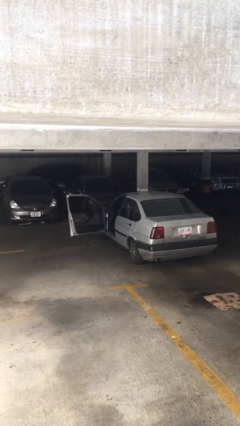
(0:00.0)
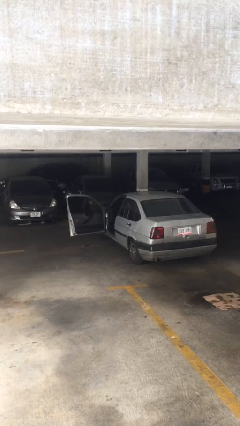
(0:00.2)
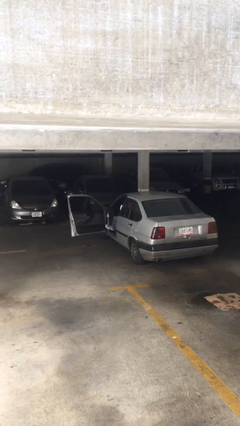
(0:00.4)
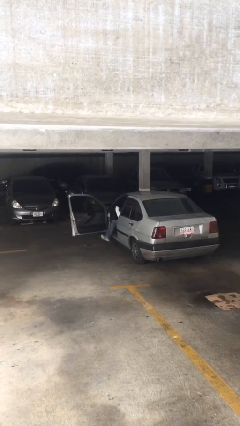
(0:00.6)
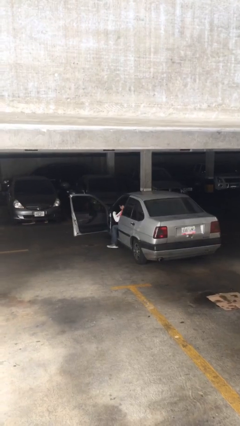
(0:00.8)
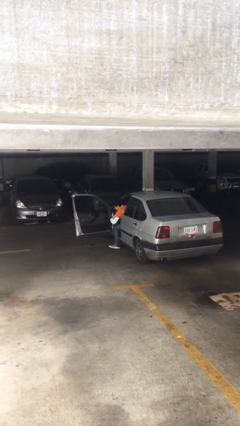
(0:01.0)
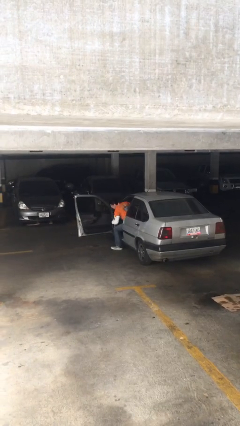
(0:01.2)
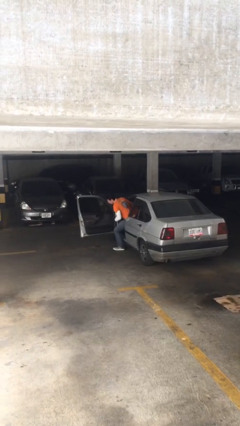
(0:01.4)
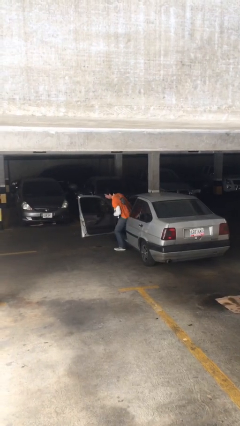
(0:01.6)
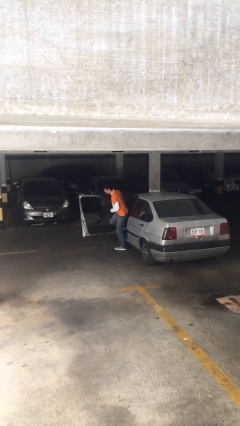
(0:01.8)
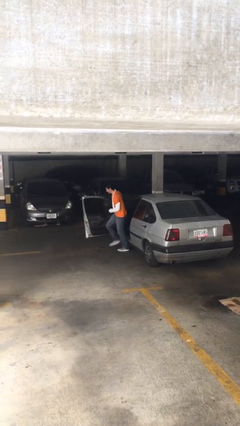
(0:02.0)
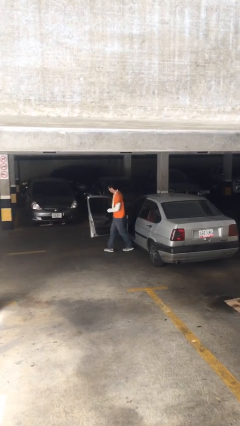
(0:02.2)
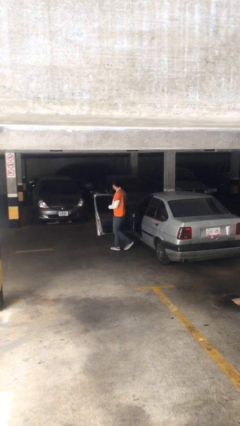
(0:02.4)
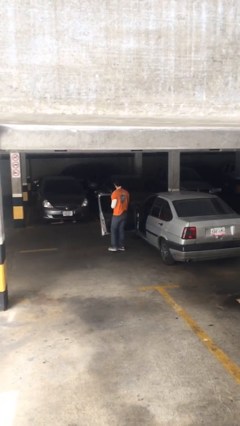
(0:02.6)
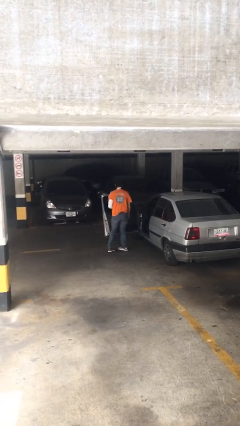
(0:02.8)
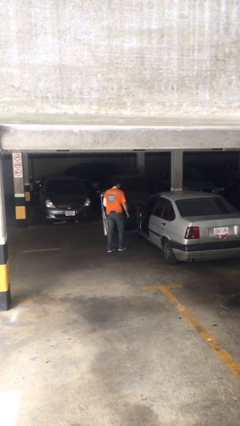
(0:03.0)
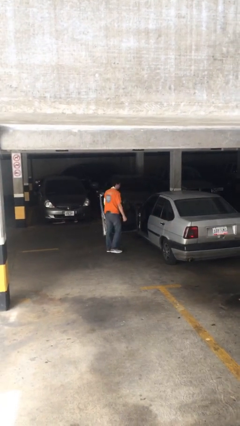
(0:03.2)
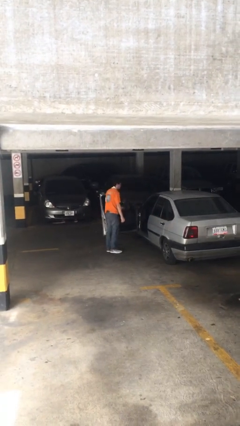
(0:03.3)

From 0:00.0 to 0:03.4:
person exits car

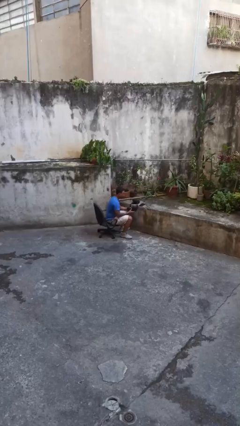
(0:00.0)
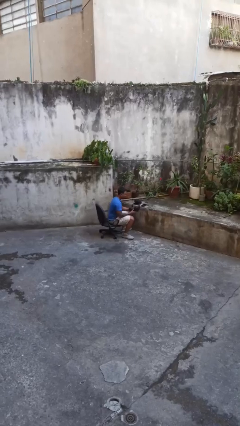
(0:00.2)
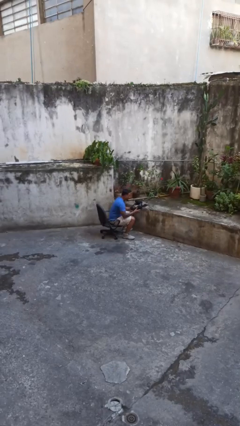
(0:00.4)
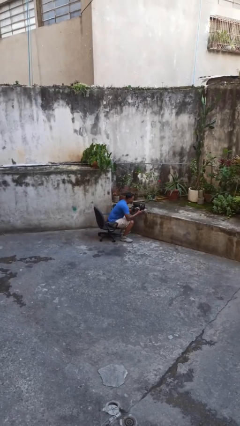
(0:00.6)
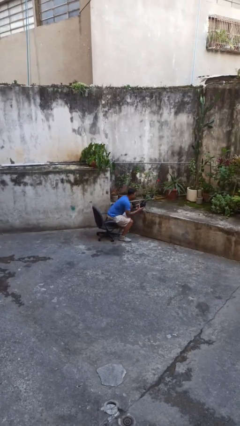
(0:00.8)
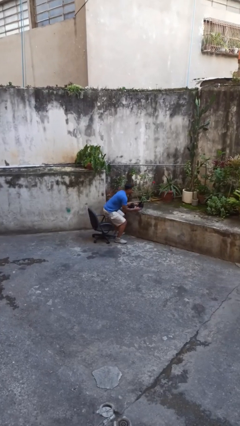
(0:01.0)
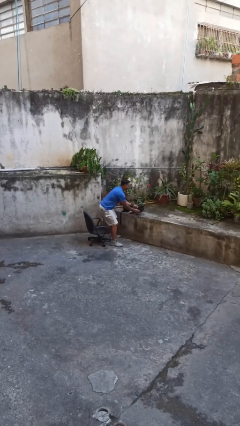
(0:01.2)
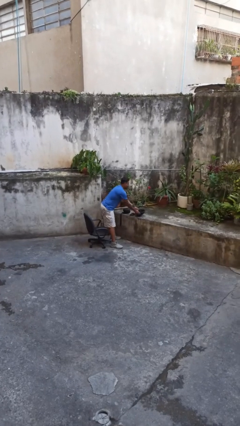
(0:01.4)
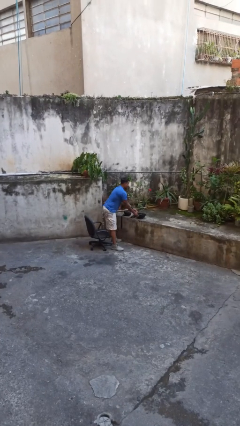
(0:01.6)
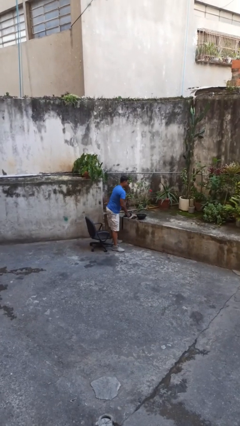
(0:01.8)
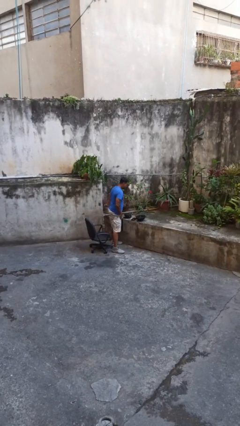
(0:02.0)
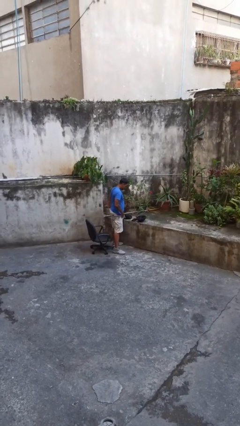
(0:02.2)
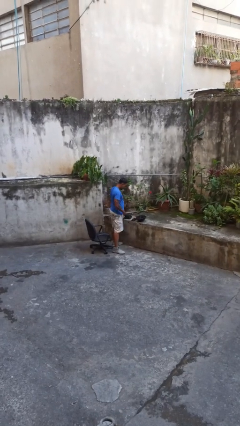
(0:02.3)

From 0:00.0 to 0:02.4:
person stands up

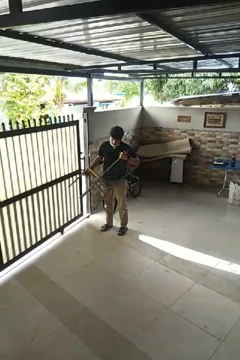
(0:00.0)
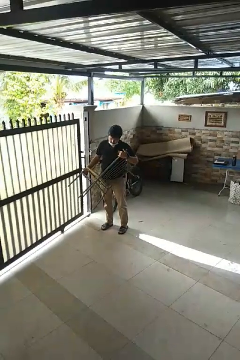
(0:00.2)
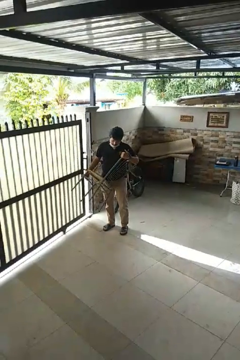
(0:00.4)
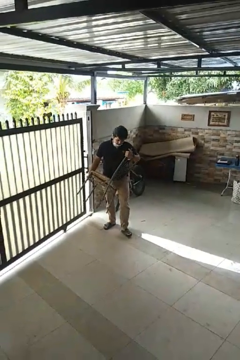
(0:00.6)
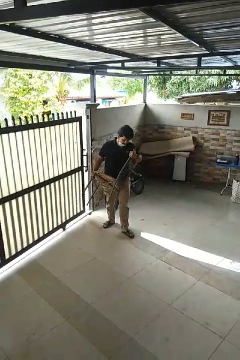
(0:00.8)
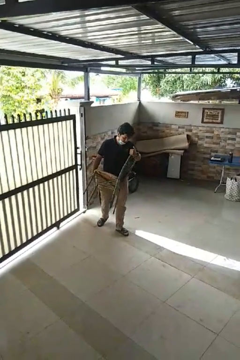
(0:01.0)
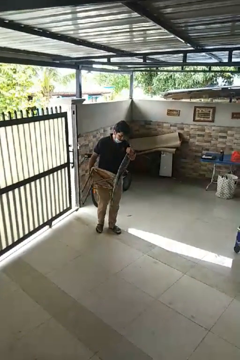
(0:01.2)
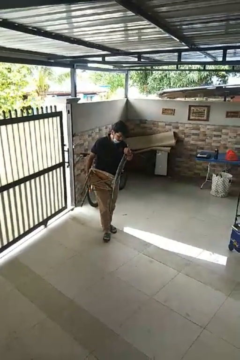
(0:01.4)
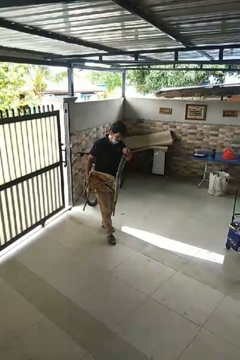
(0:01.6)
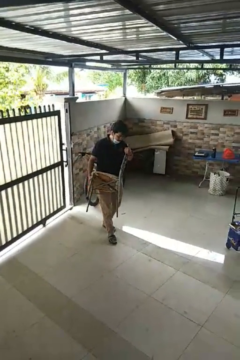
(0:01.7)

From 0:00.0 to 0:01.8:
person carries furniture

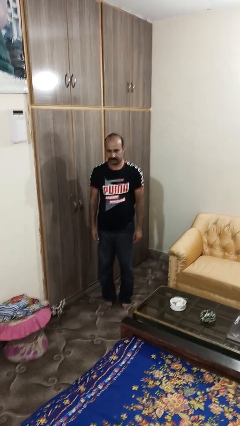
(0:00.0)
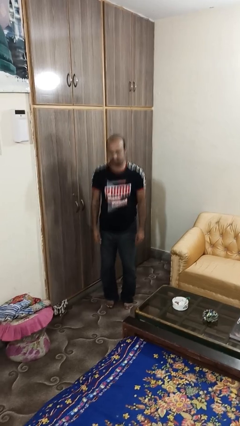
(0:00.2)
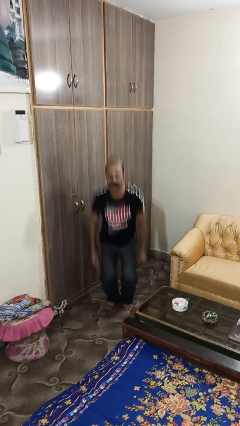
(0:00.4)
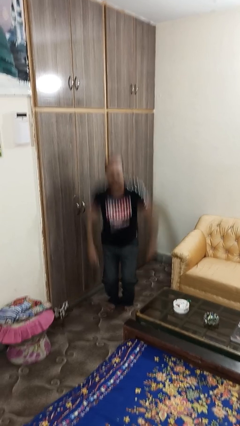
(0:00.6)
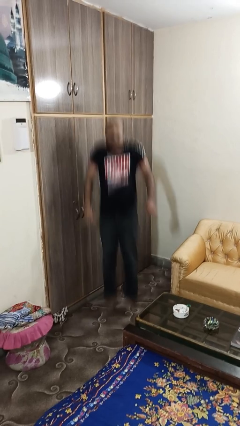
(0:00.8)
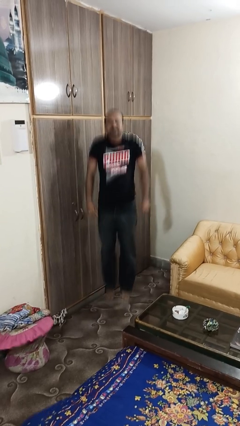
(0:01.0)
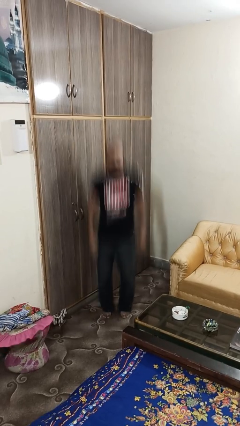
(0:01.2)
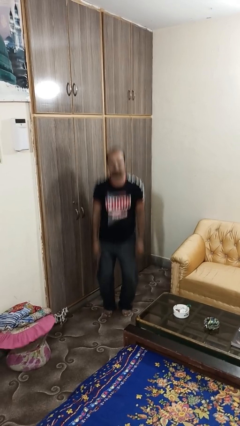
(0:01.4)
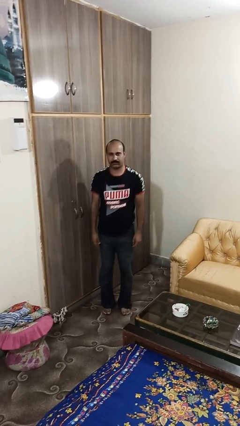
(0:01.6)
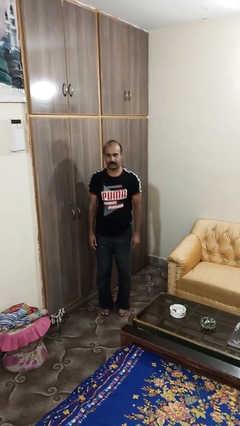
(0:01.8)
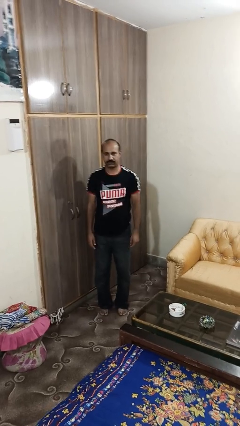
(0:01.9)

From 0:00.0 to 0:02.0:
person jumps

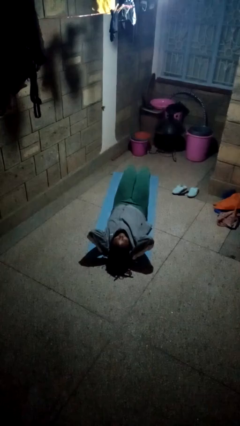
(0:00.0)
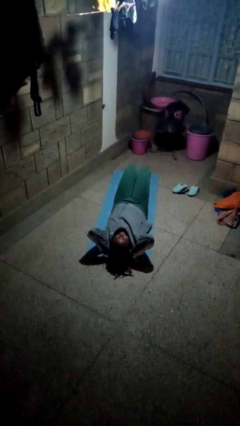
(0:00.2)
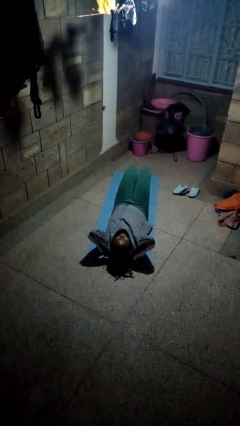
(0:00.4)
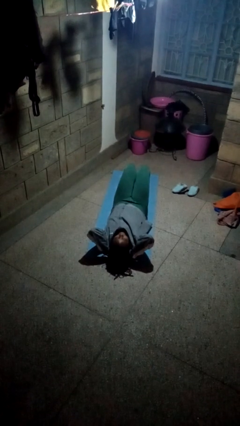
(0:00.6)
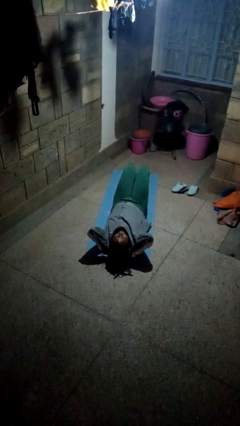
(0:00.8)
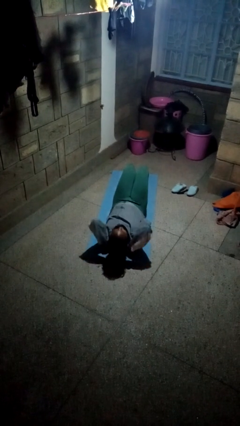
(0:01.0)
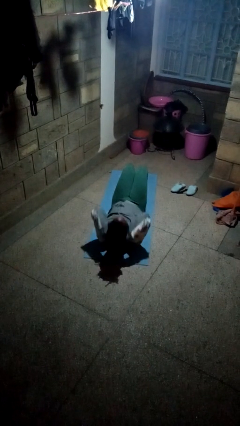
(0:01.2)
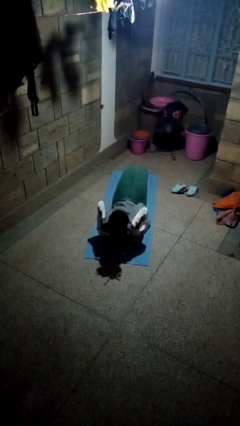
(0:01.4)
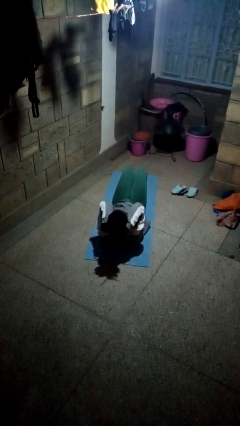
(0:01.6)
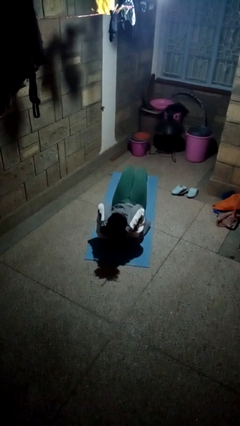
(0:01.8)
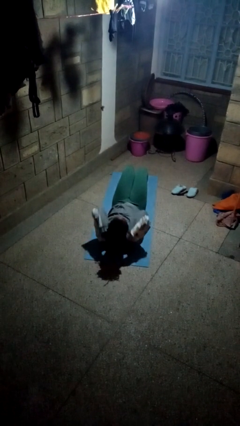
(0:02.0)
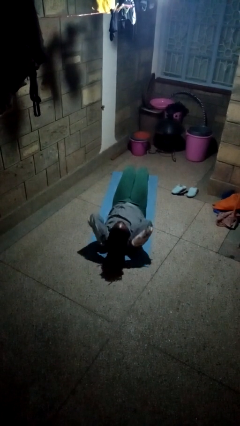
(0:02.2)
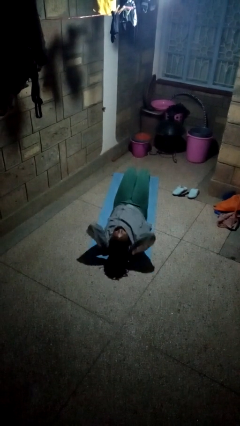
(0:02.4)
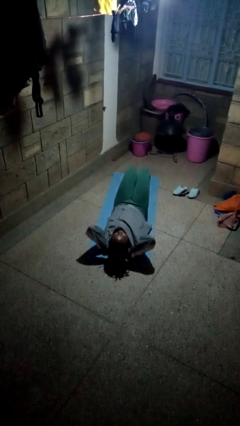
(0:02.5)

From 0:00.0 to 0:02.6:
person exercises with situp

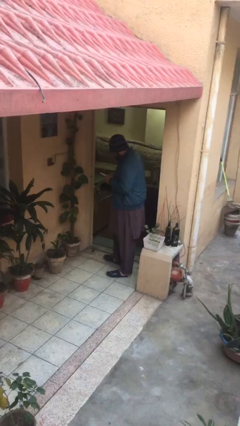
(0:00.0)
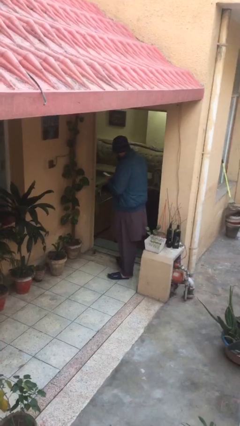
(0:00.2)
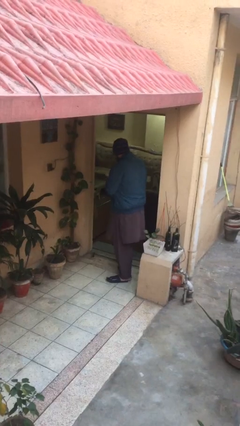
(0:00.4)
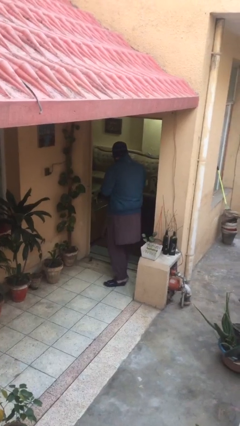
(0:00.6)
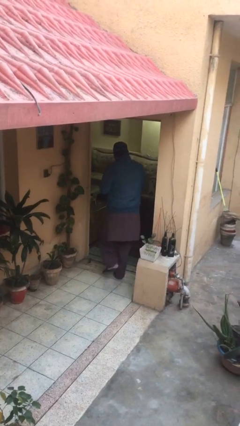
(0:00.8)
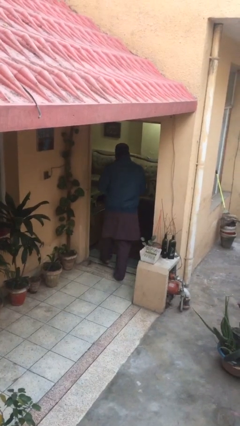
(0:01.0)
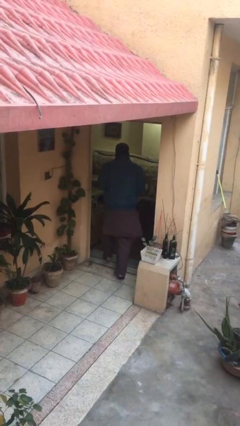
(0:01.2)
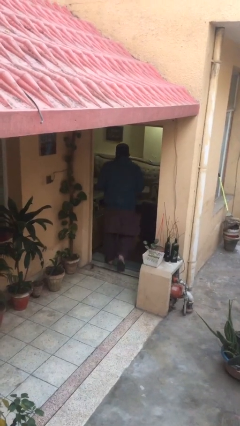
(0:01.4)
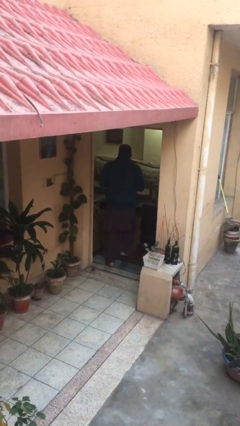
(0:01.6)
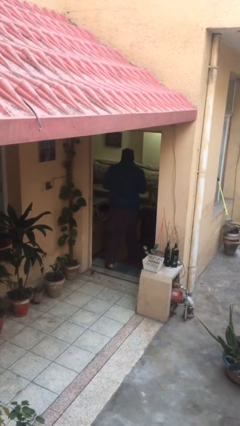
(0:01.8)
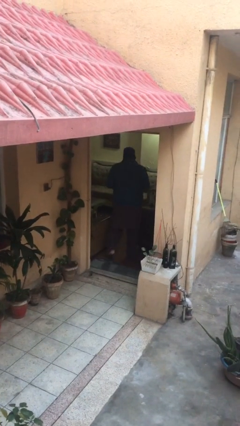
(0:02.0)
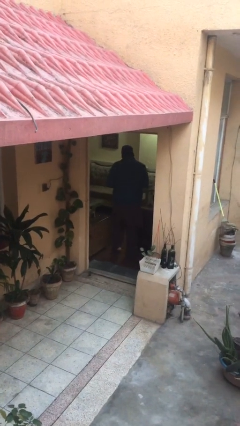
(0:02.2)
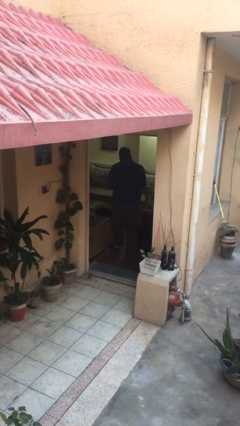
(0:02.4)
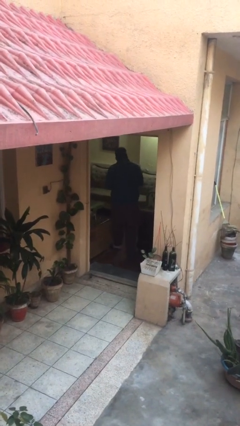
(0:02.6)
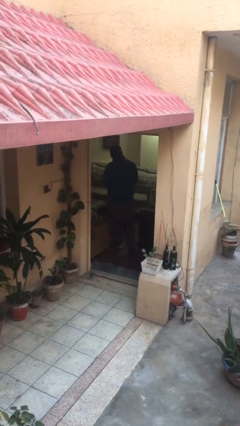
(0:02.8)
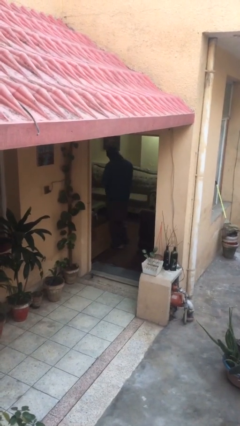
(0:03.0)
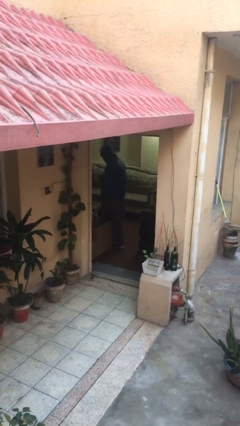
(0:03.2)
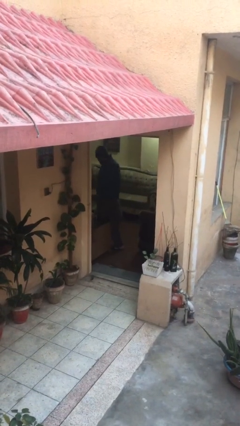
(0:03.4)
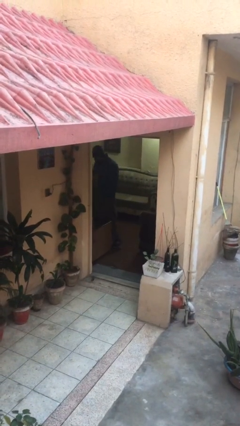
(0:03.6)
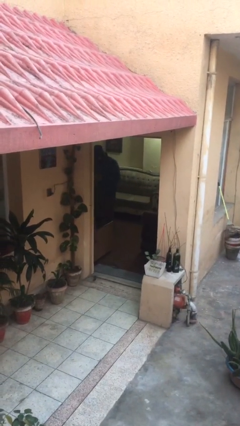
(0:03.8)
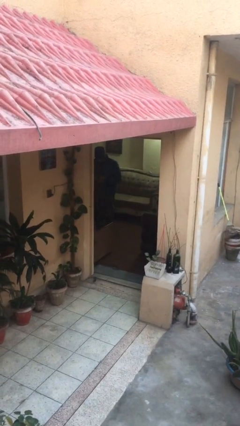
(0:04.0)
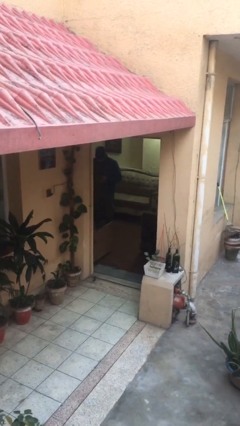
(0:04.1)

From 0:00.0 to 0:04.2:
person exits scene through structure

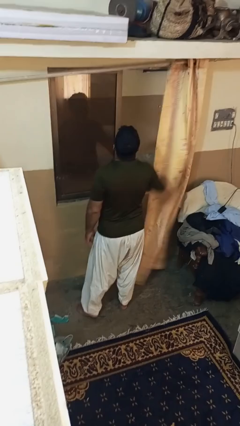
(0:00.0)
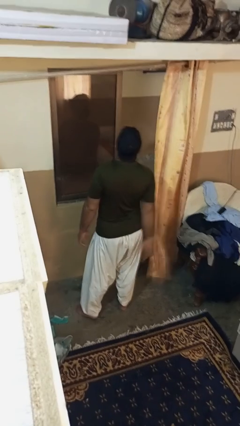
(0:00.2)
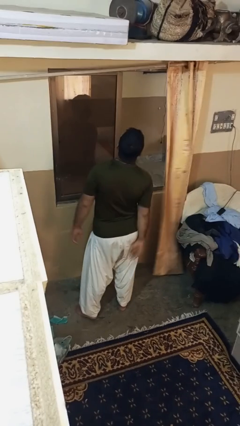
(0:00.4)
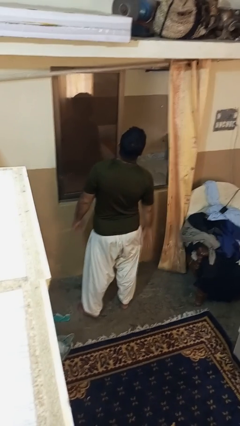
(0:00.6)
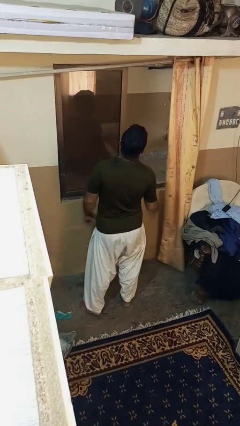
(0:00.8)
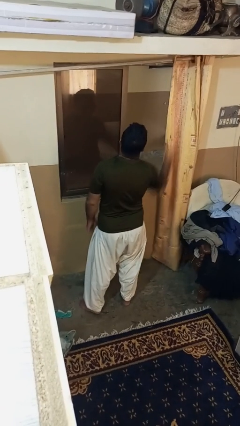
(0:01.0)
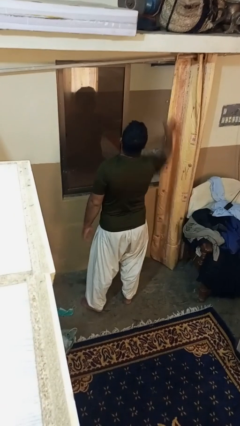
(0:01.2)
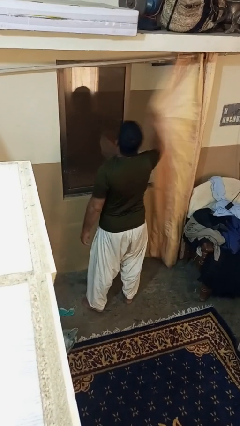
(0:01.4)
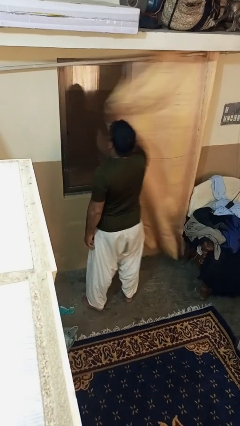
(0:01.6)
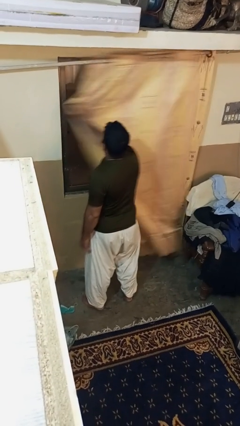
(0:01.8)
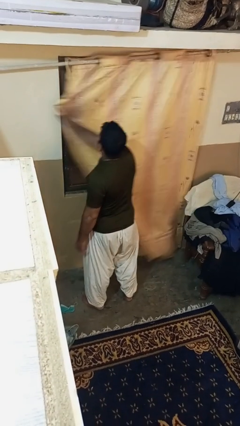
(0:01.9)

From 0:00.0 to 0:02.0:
person closes curtains
